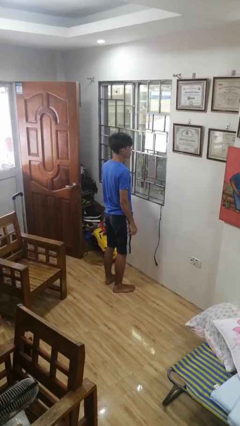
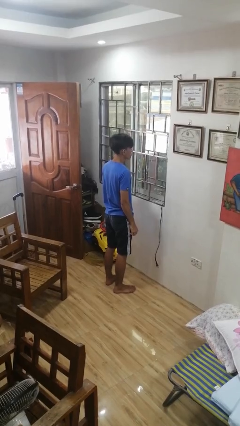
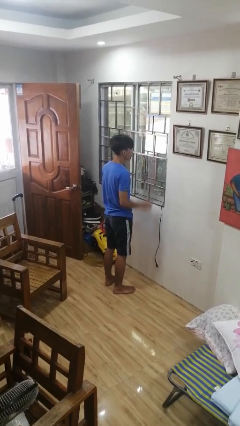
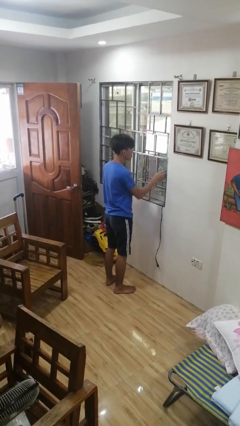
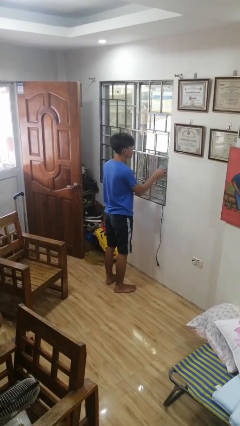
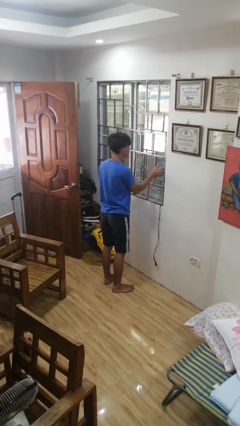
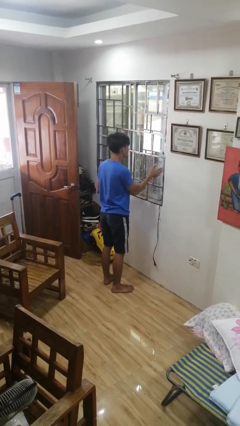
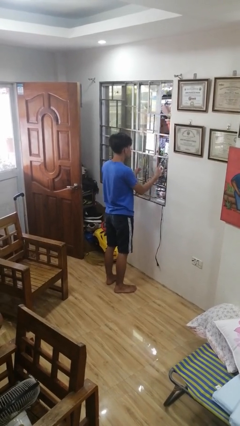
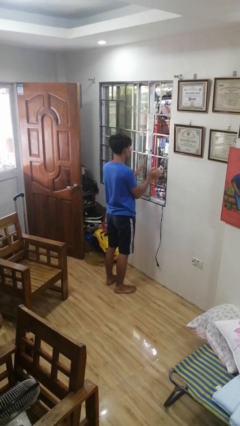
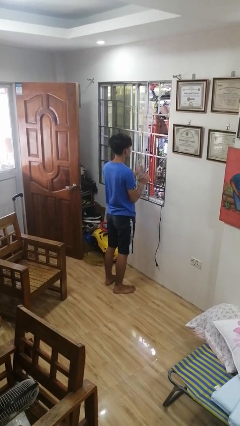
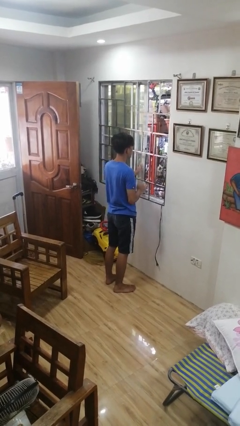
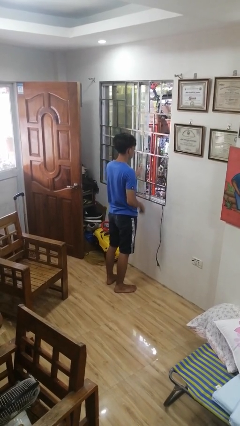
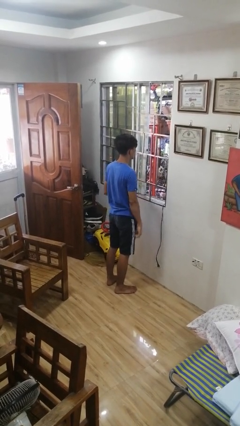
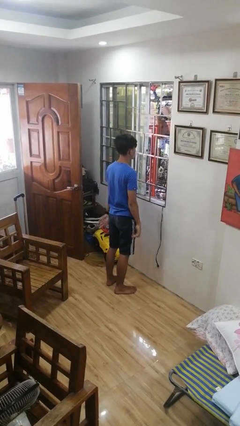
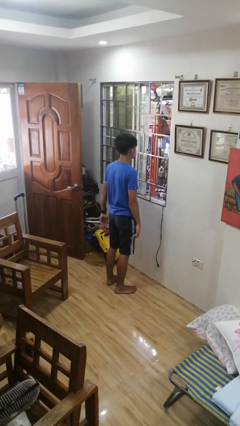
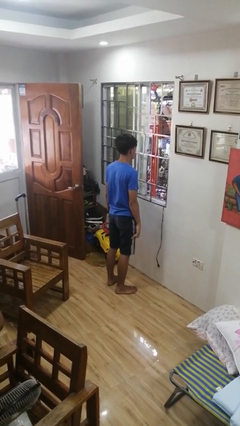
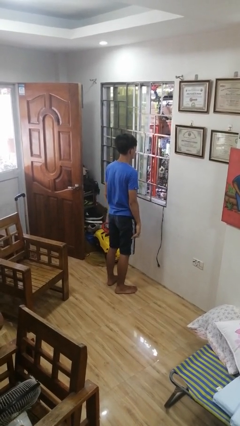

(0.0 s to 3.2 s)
person opens home window

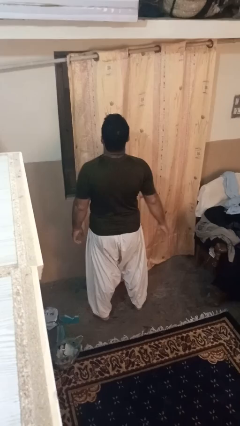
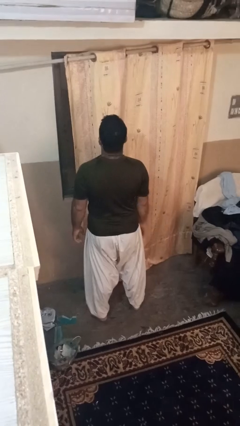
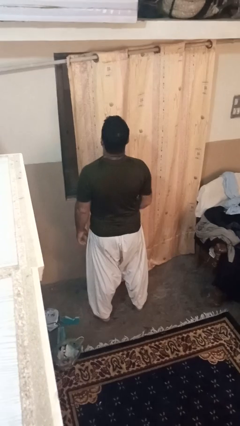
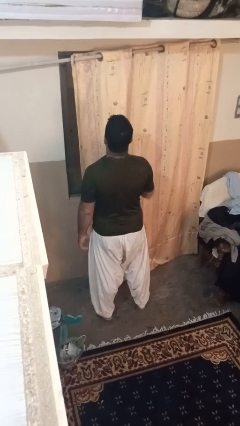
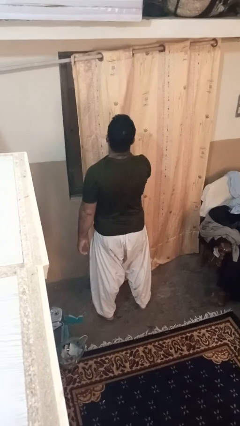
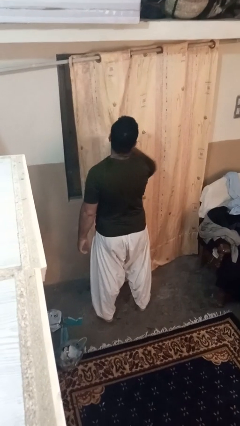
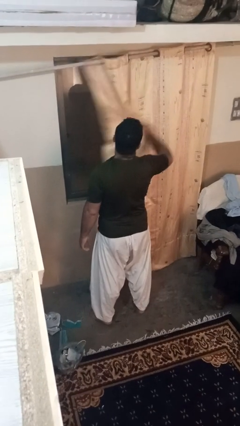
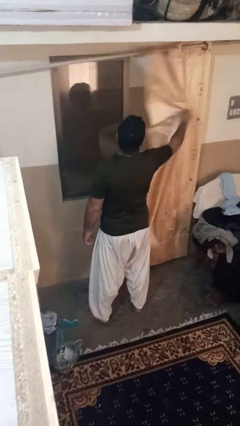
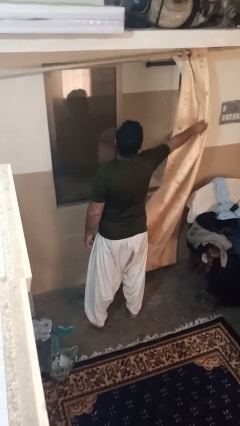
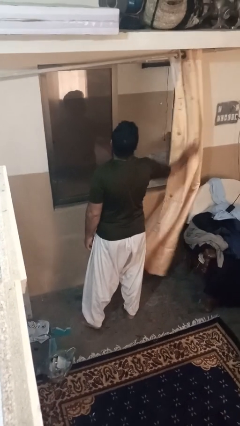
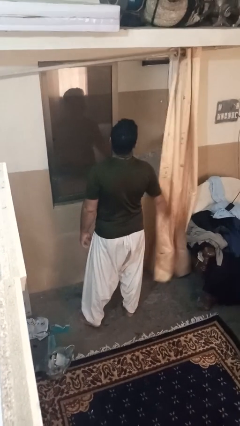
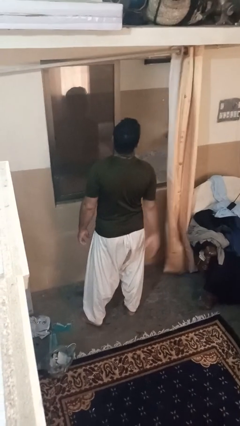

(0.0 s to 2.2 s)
person opens curtains

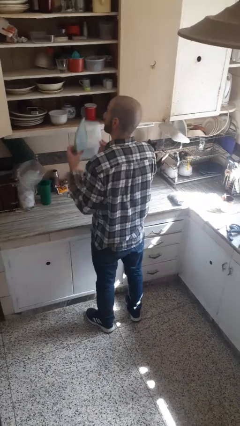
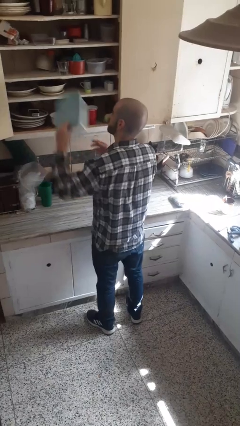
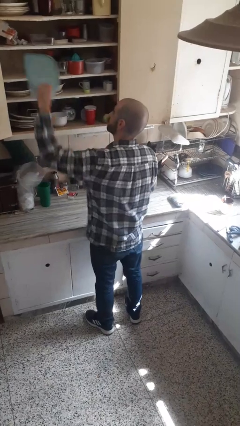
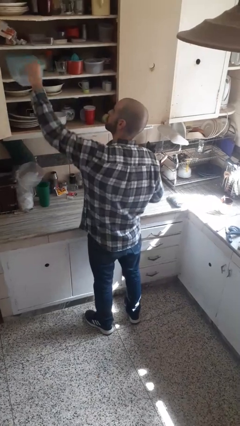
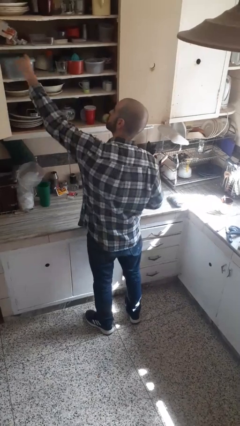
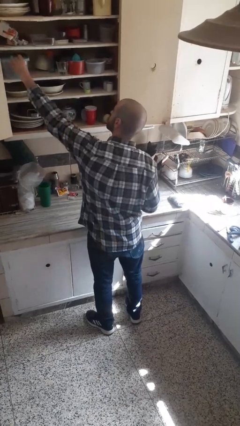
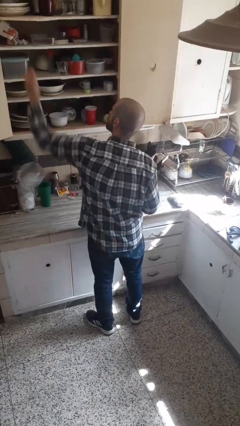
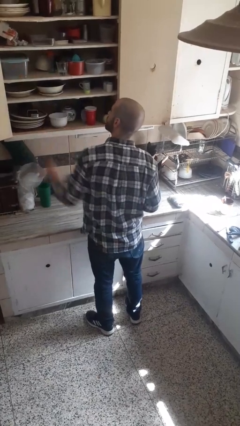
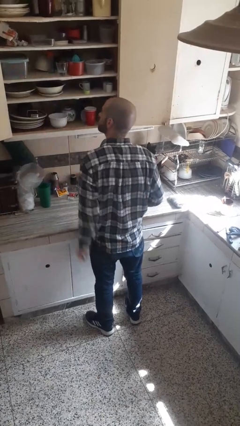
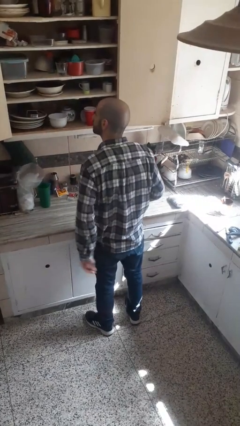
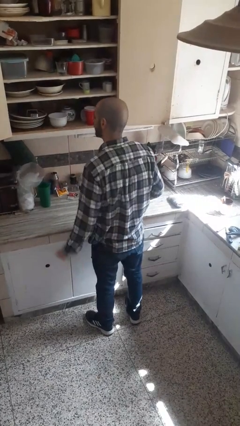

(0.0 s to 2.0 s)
person puts down object into cabinet

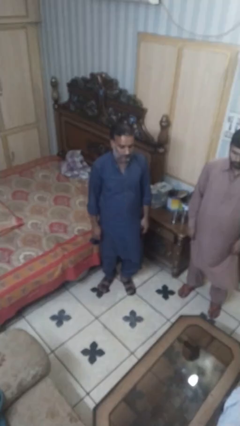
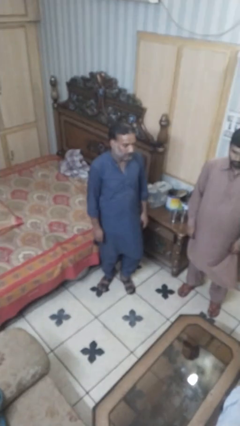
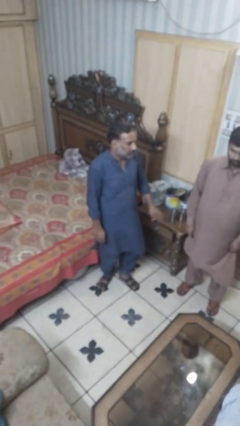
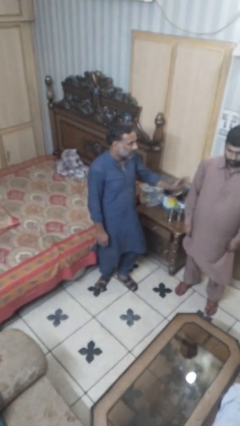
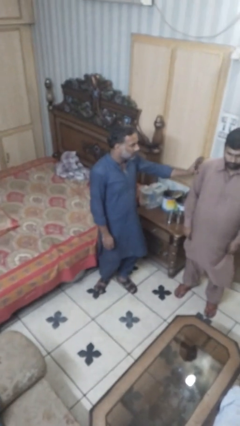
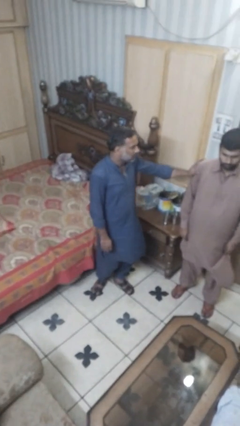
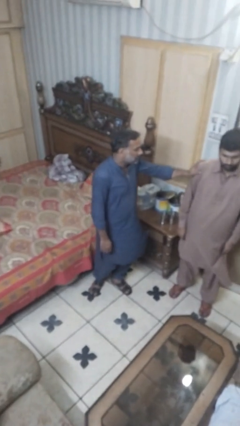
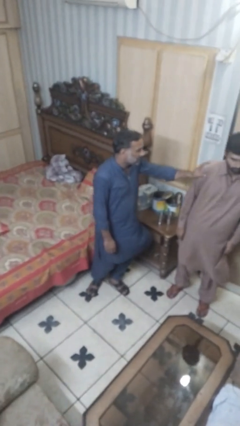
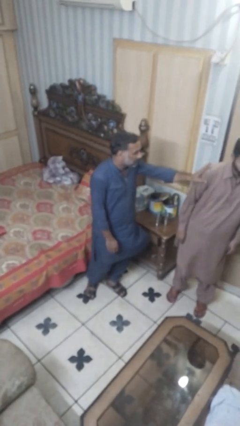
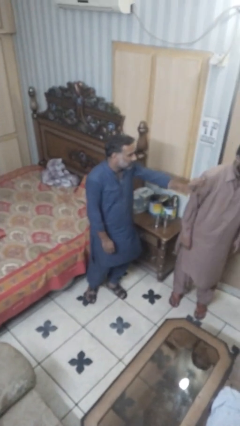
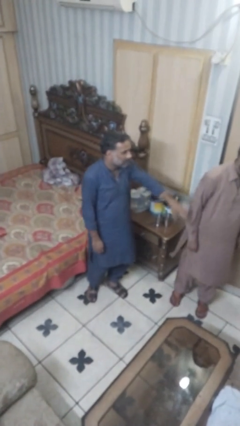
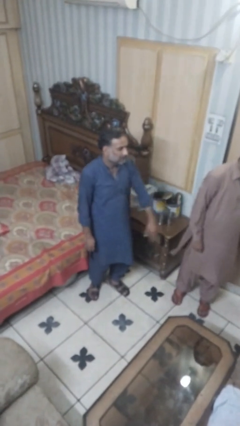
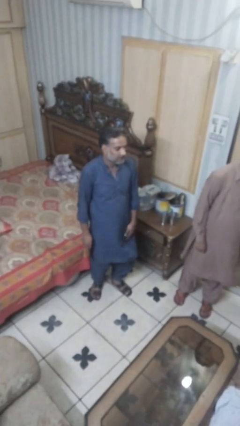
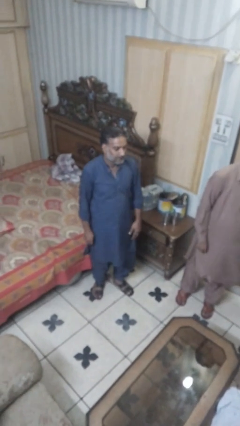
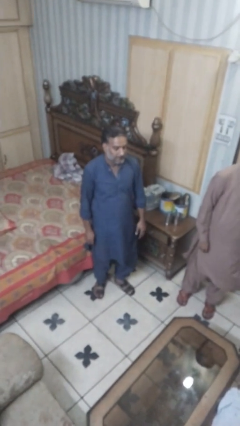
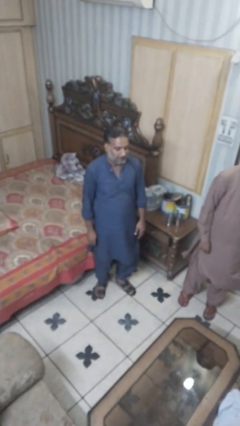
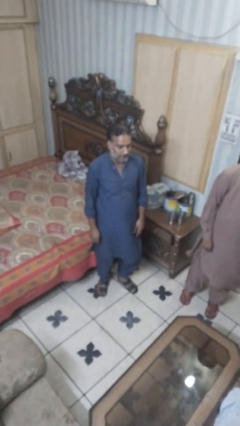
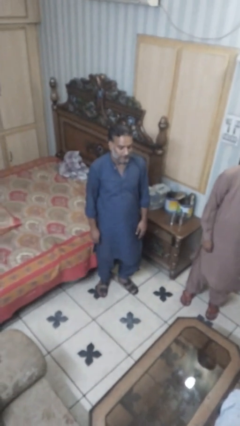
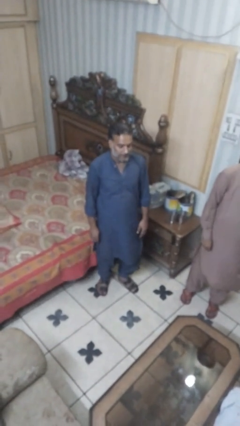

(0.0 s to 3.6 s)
person shoves person

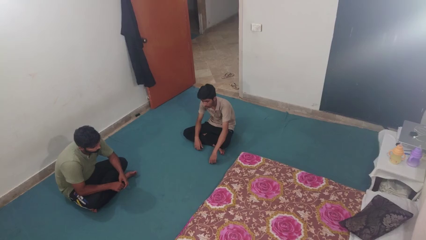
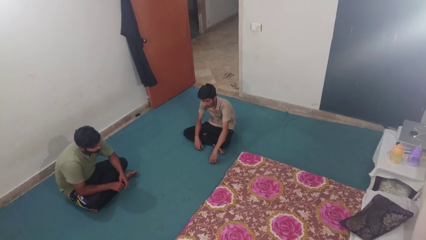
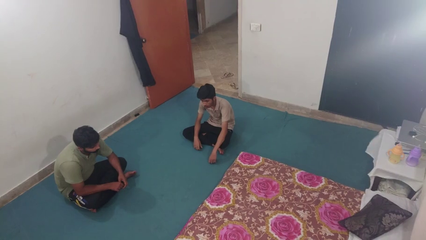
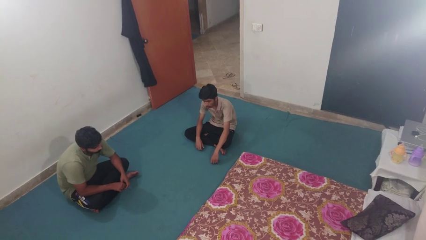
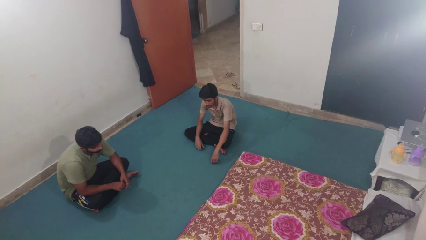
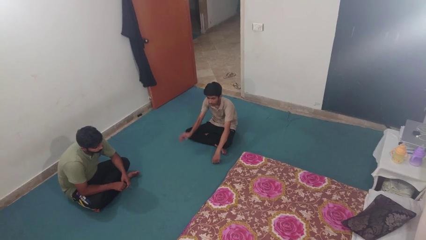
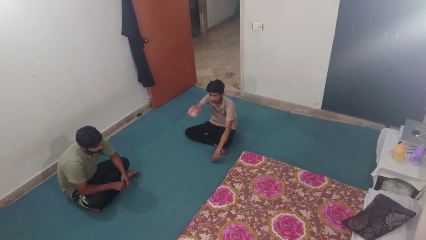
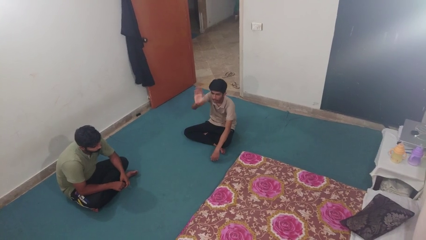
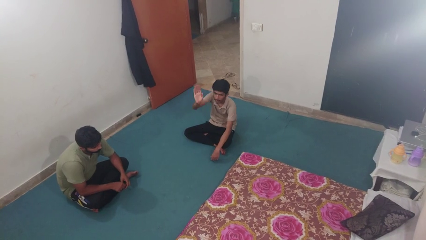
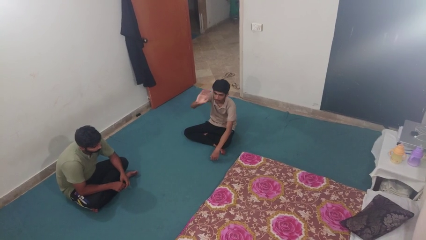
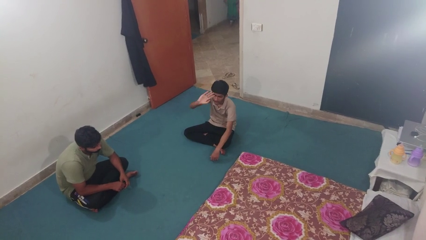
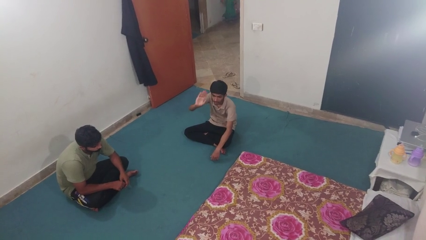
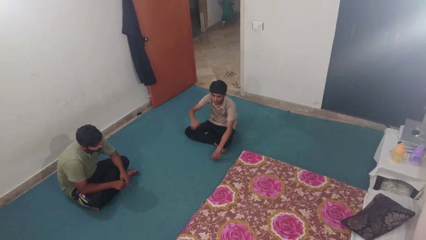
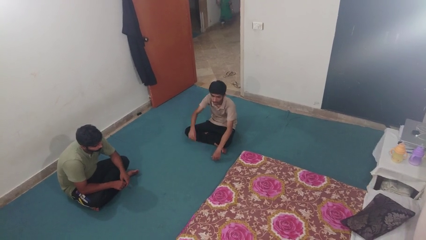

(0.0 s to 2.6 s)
person waves at person

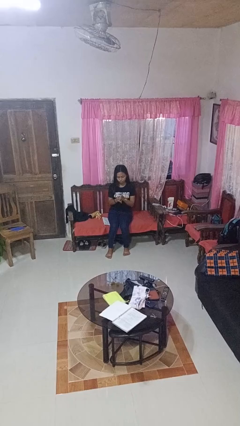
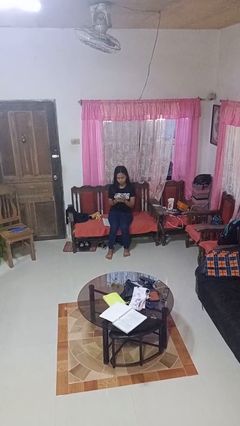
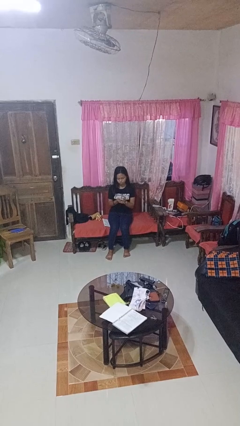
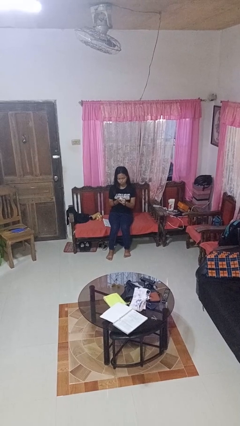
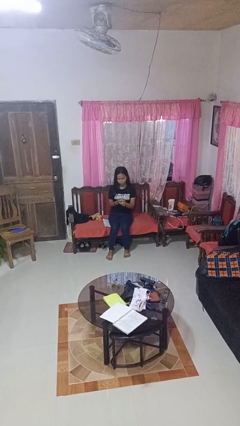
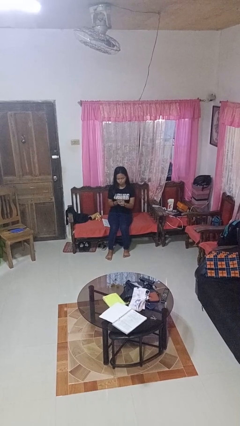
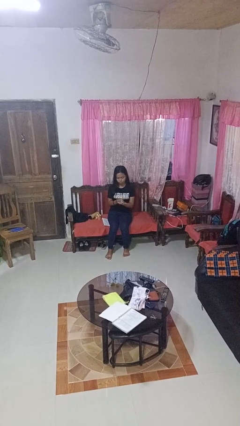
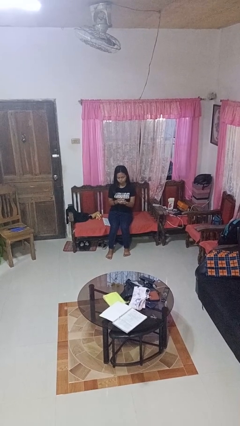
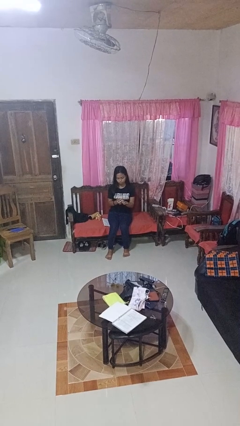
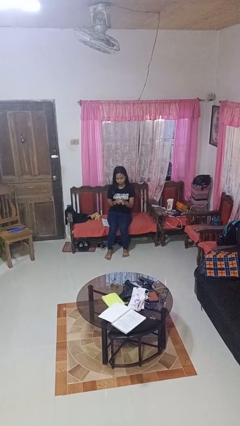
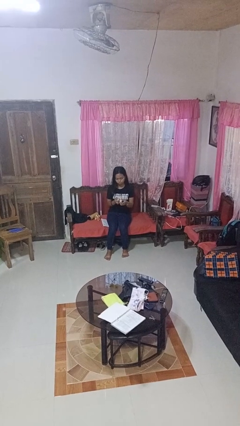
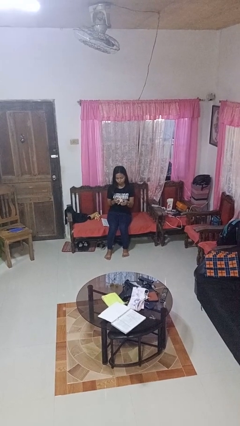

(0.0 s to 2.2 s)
person crumples paper

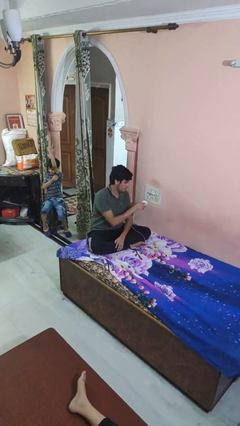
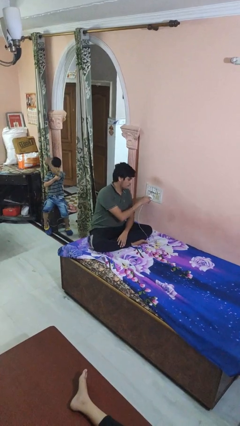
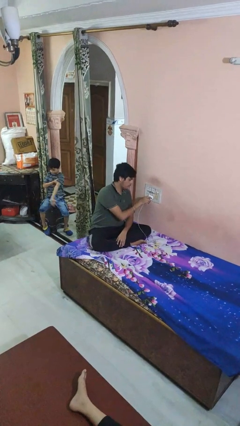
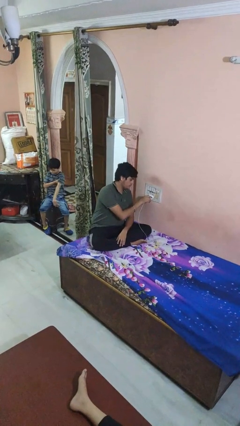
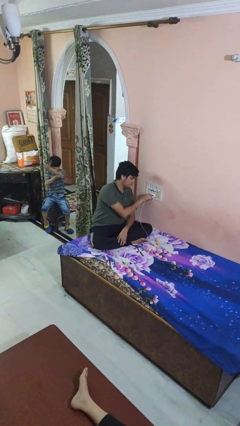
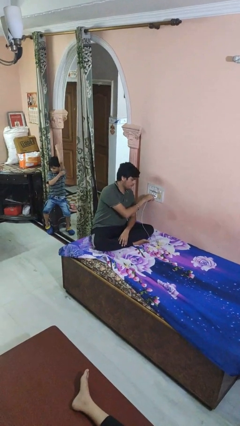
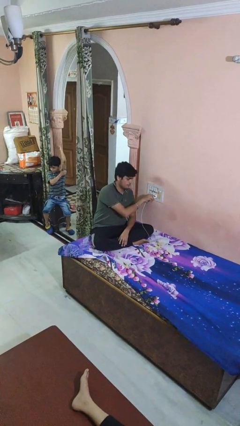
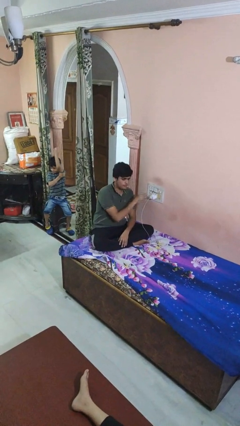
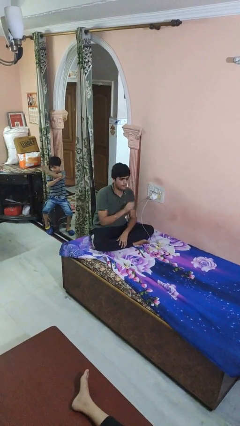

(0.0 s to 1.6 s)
person plugs into electrical socket
